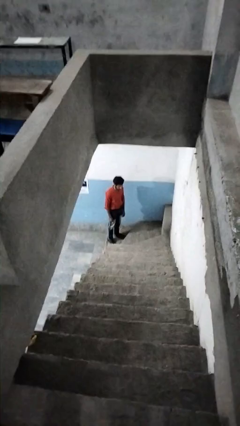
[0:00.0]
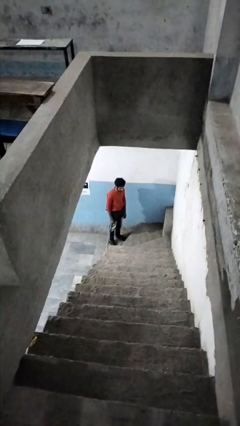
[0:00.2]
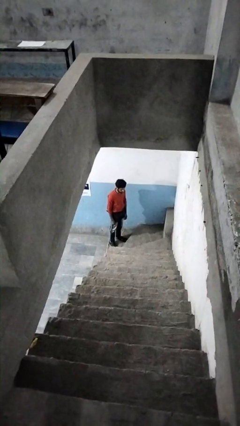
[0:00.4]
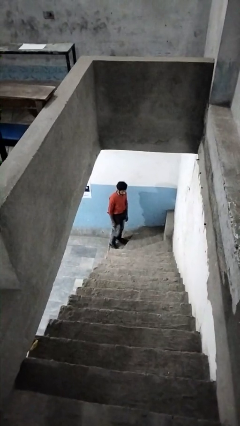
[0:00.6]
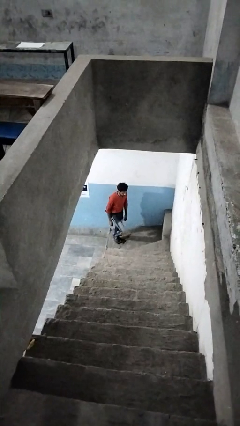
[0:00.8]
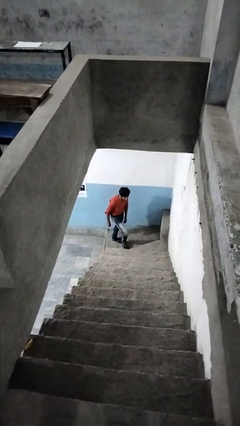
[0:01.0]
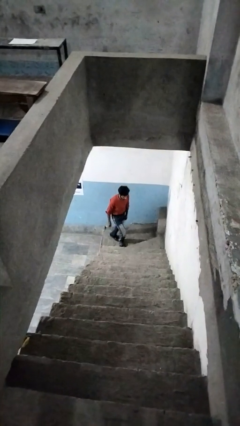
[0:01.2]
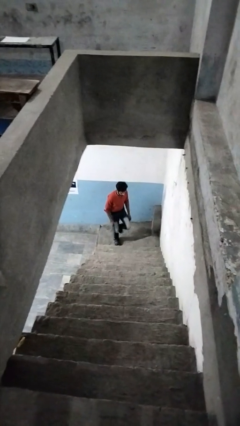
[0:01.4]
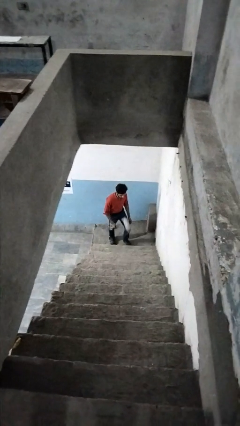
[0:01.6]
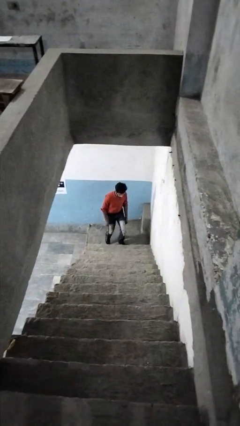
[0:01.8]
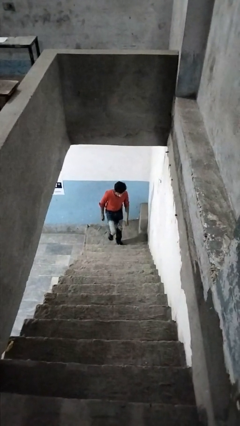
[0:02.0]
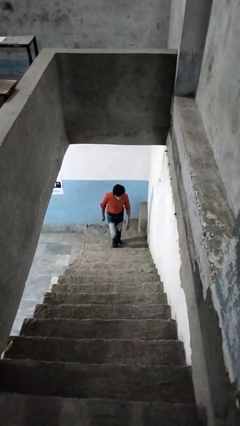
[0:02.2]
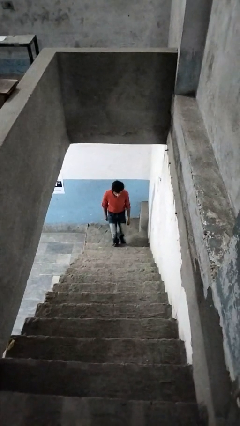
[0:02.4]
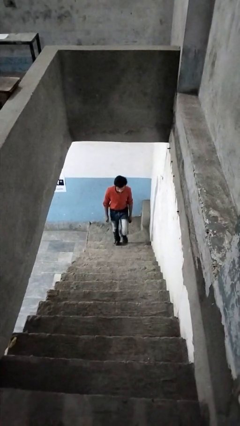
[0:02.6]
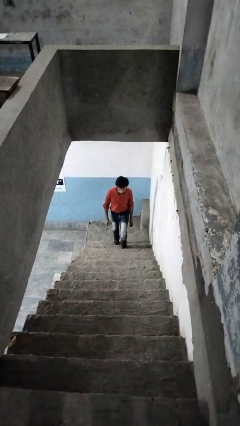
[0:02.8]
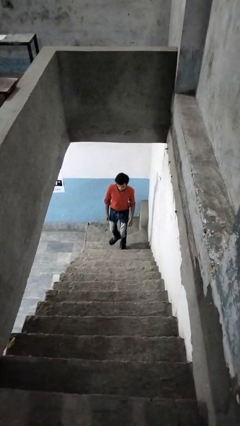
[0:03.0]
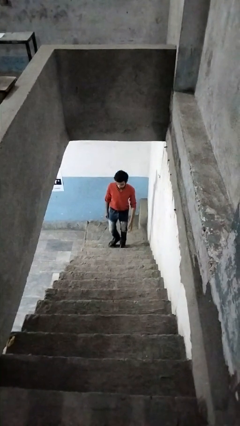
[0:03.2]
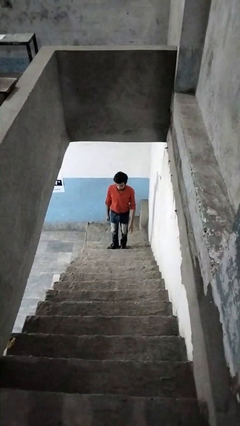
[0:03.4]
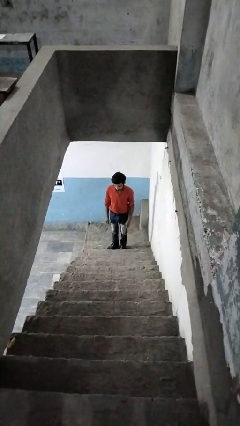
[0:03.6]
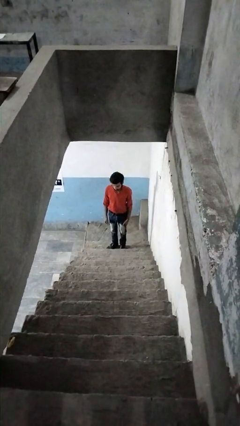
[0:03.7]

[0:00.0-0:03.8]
person climbs up stairs

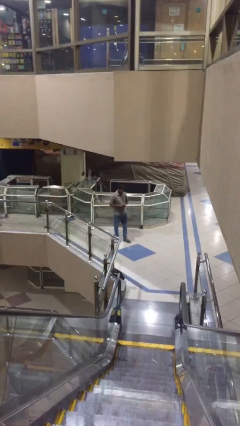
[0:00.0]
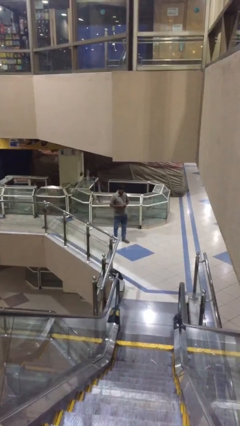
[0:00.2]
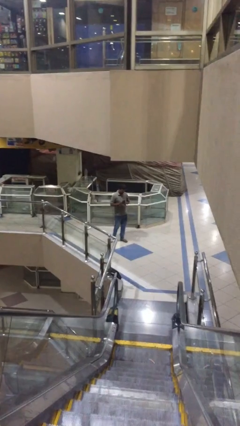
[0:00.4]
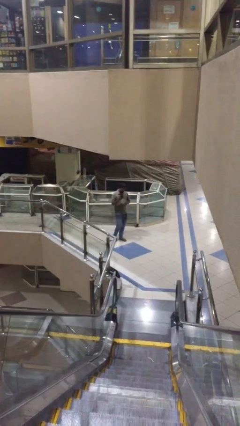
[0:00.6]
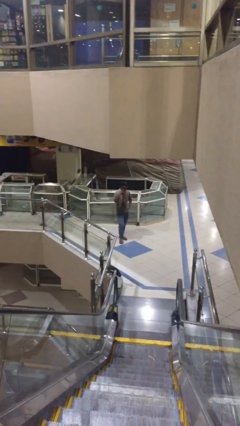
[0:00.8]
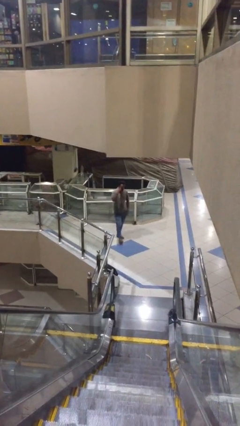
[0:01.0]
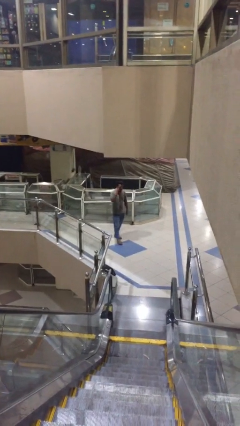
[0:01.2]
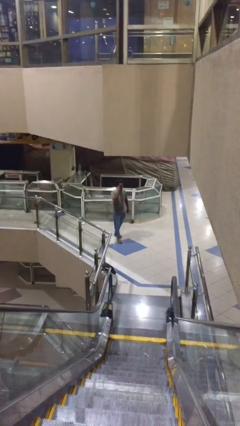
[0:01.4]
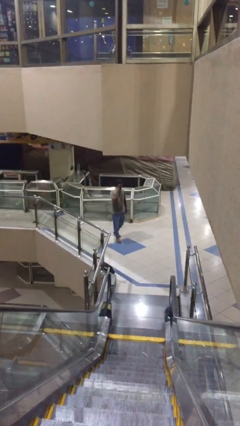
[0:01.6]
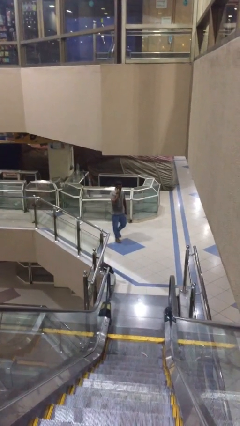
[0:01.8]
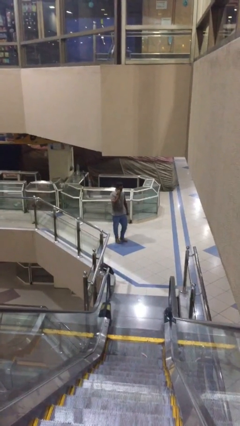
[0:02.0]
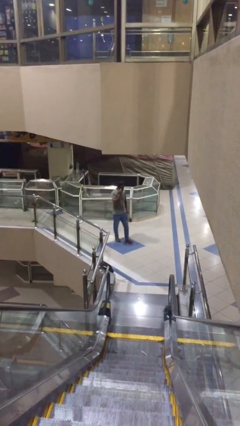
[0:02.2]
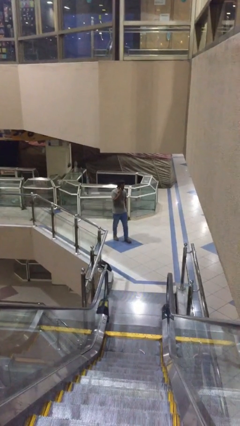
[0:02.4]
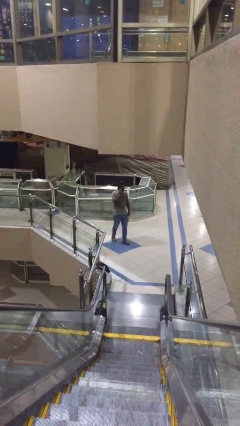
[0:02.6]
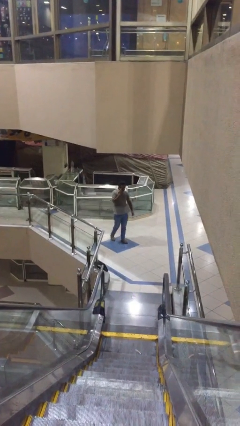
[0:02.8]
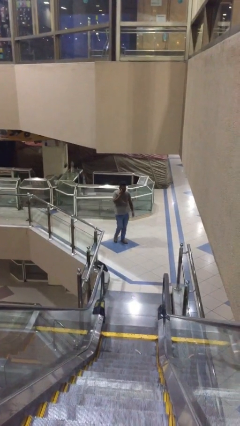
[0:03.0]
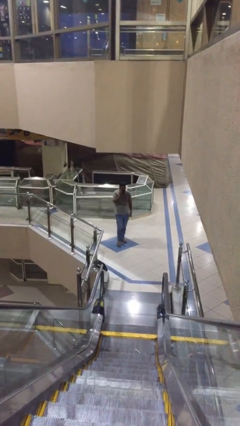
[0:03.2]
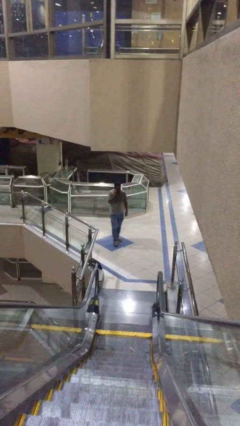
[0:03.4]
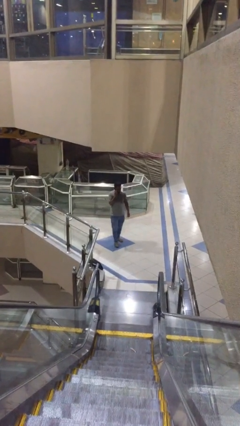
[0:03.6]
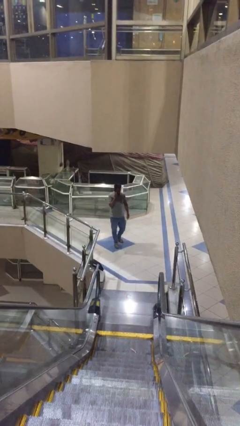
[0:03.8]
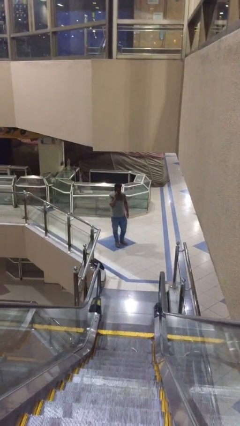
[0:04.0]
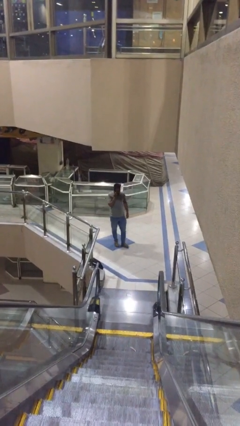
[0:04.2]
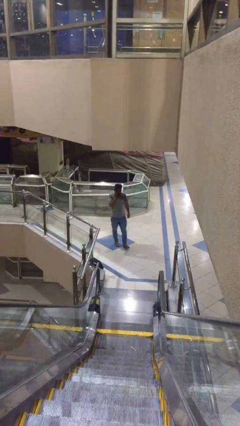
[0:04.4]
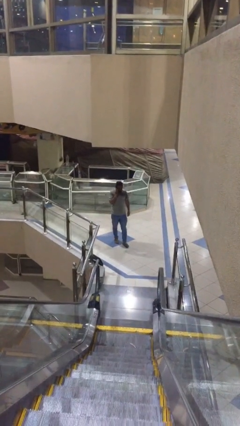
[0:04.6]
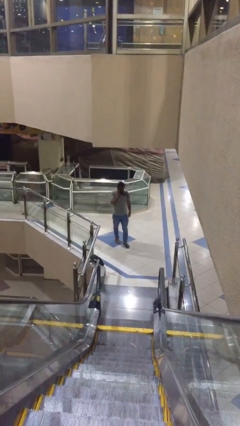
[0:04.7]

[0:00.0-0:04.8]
person talks on phone

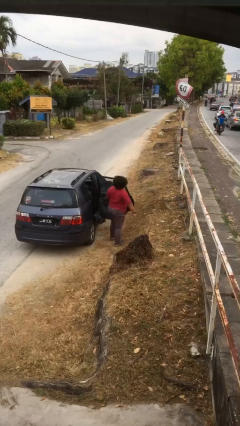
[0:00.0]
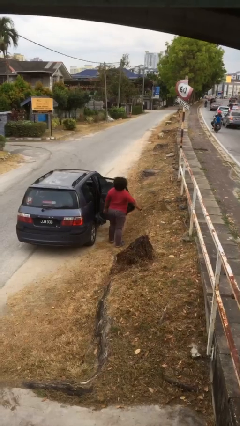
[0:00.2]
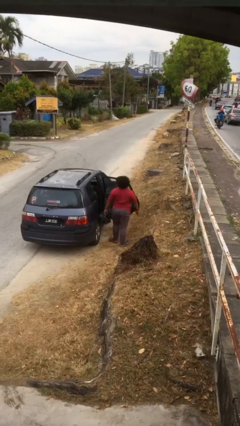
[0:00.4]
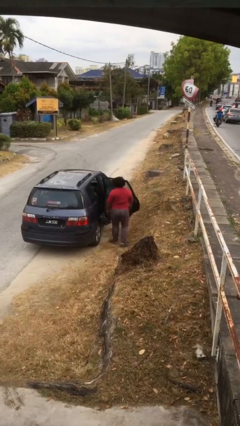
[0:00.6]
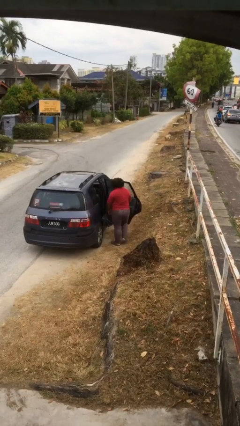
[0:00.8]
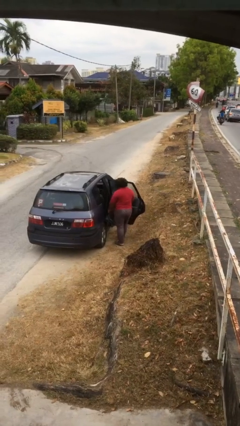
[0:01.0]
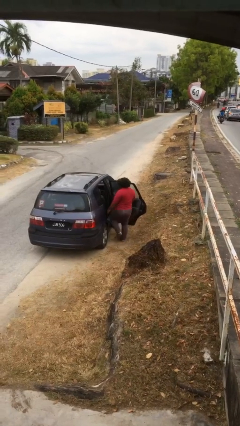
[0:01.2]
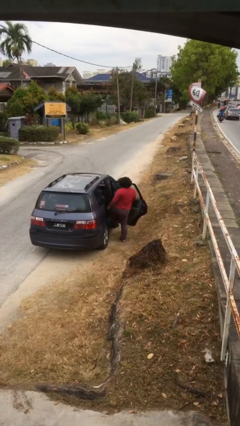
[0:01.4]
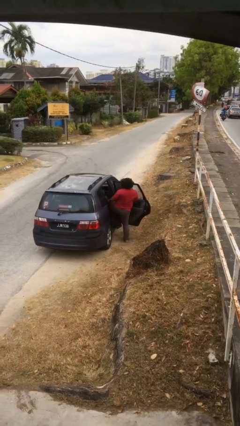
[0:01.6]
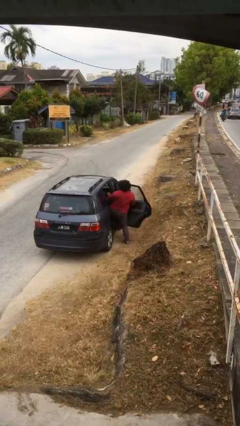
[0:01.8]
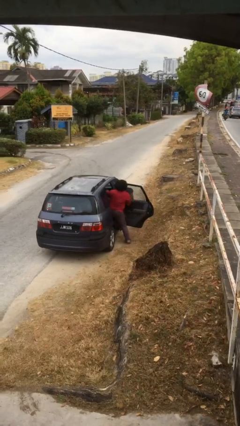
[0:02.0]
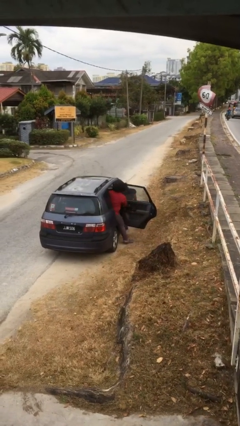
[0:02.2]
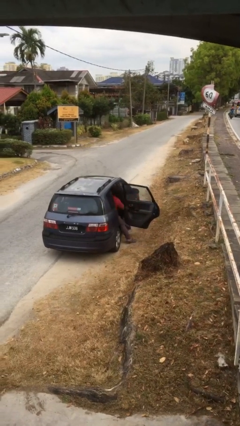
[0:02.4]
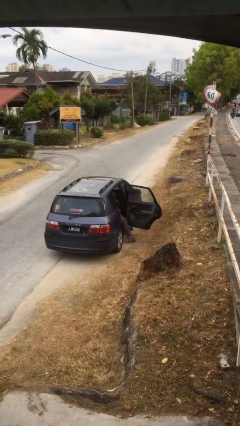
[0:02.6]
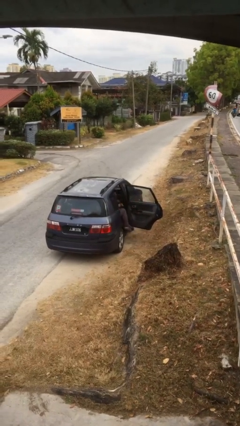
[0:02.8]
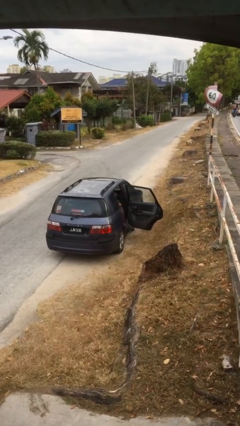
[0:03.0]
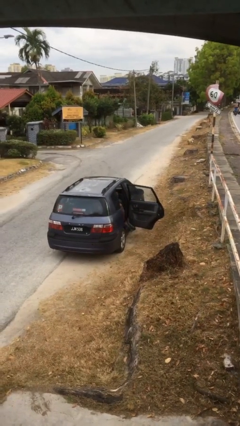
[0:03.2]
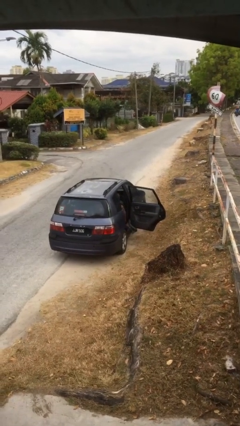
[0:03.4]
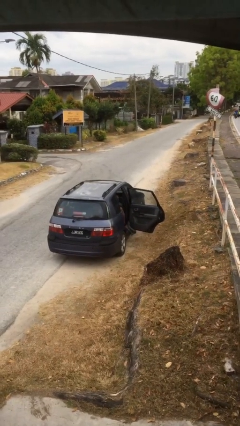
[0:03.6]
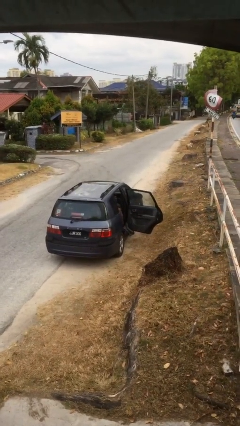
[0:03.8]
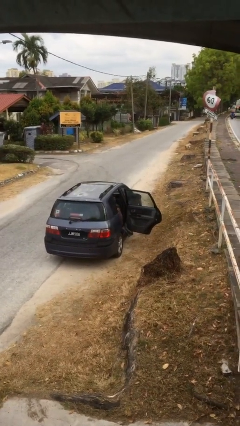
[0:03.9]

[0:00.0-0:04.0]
person enters car

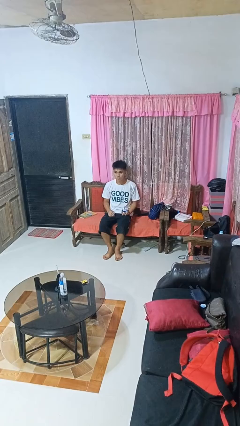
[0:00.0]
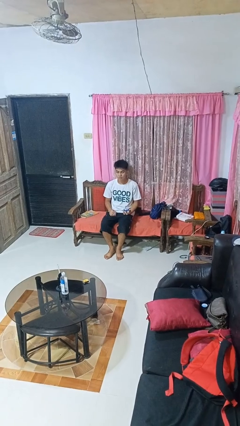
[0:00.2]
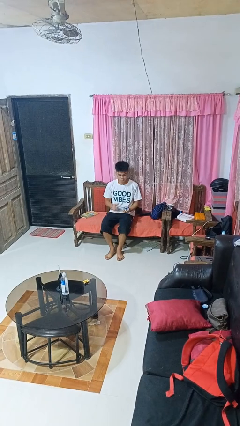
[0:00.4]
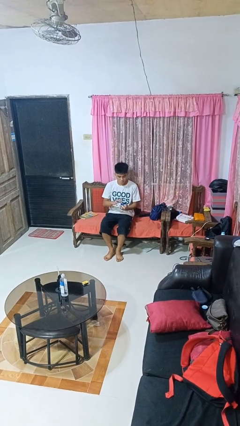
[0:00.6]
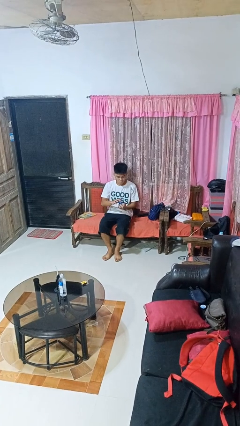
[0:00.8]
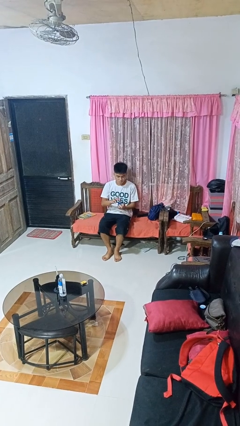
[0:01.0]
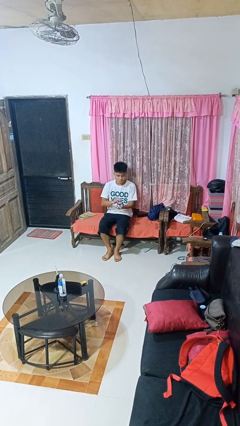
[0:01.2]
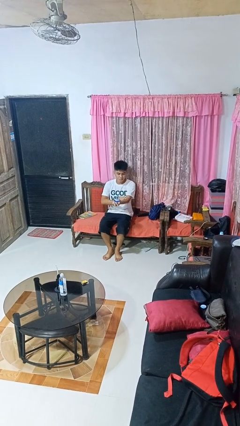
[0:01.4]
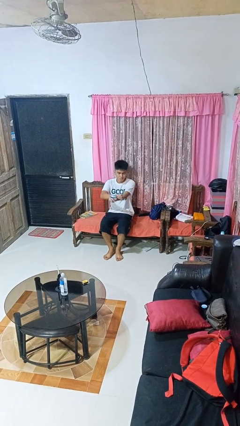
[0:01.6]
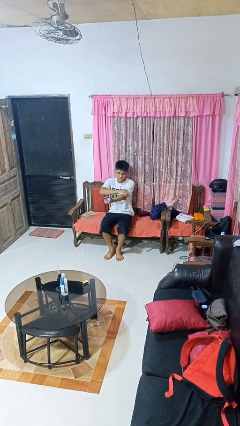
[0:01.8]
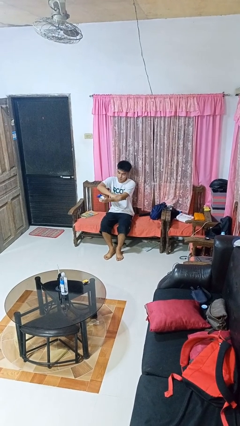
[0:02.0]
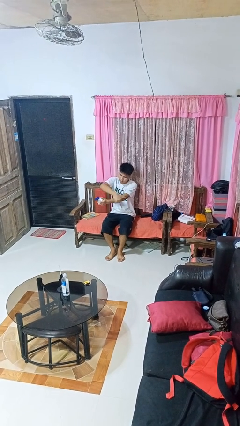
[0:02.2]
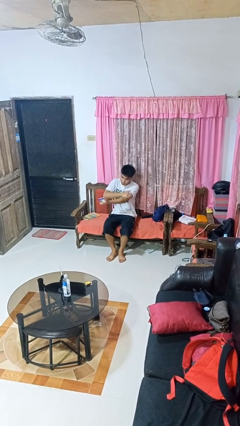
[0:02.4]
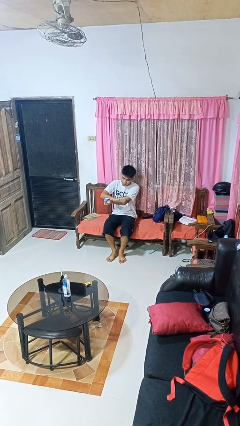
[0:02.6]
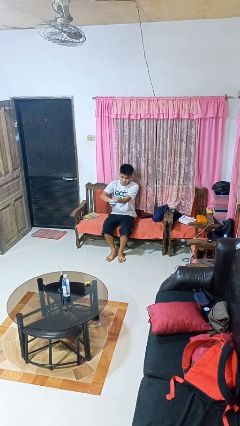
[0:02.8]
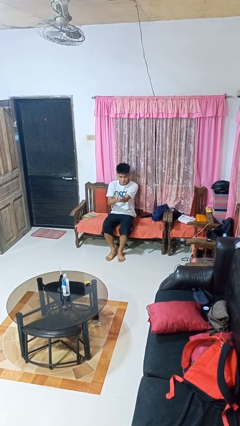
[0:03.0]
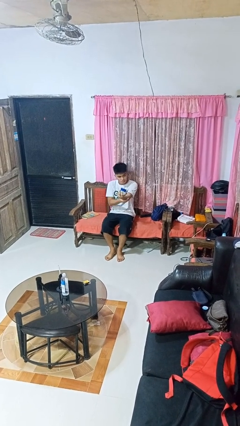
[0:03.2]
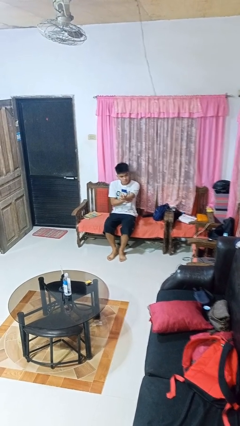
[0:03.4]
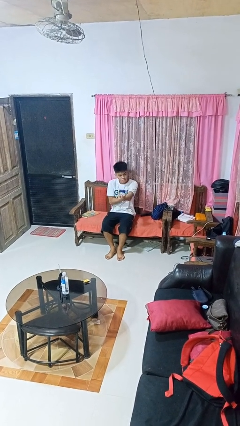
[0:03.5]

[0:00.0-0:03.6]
person applies sunscreen

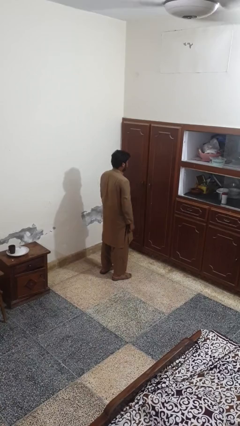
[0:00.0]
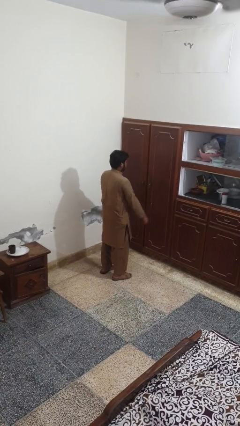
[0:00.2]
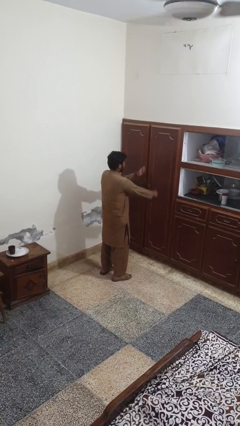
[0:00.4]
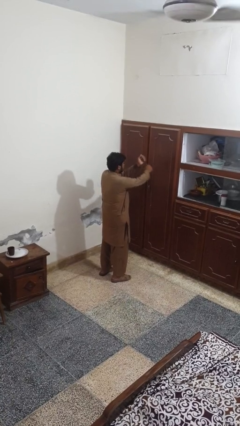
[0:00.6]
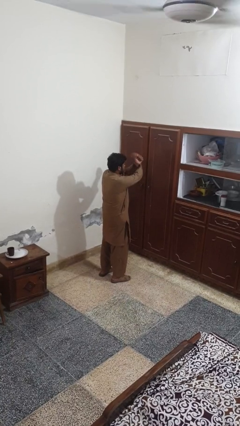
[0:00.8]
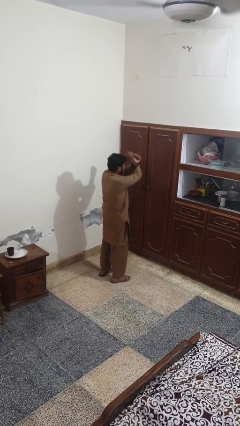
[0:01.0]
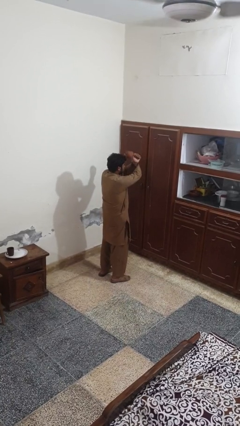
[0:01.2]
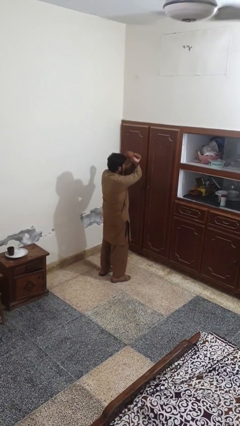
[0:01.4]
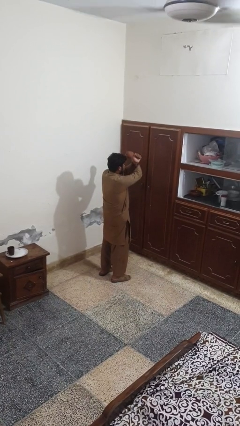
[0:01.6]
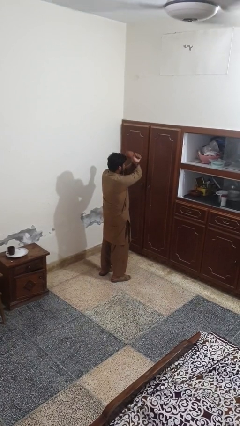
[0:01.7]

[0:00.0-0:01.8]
person gestures arms x
